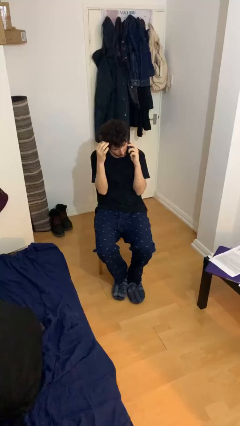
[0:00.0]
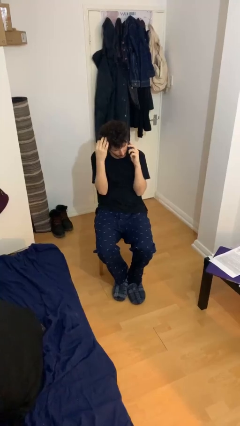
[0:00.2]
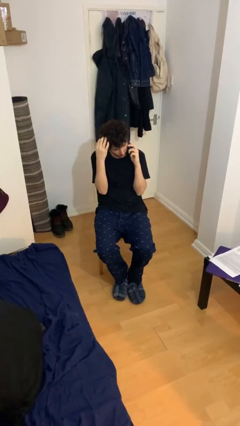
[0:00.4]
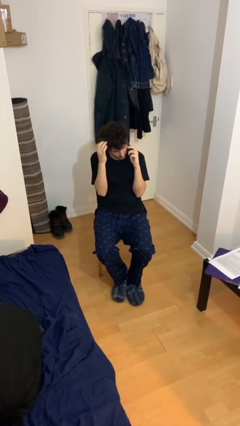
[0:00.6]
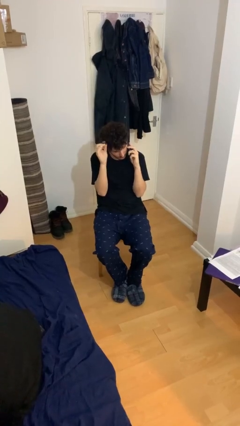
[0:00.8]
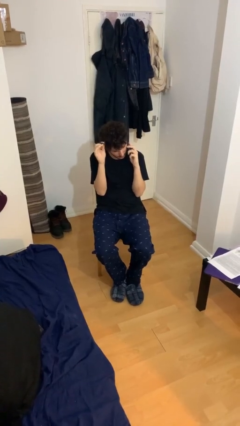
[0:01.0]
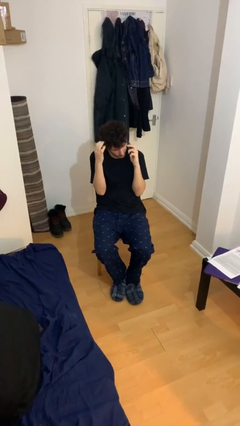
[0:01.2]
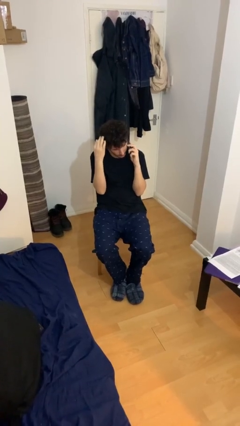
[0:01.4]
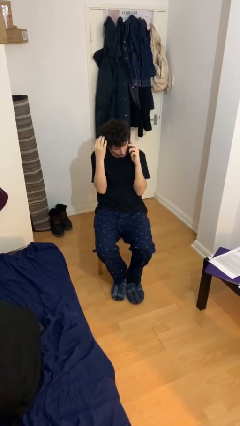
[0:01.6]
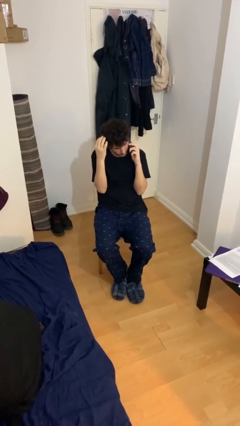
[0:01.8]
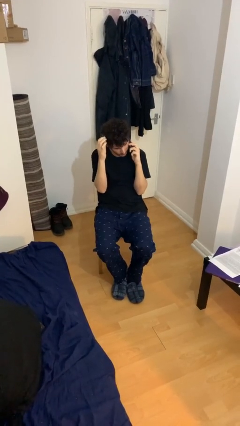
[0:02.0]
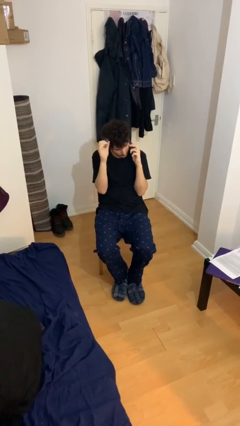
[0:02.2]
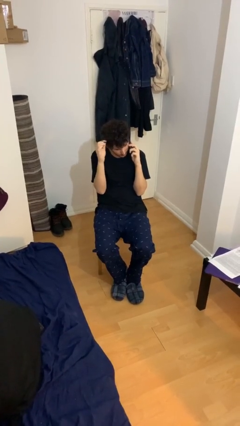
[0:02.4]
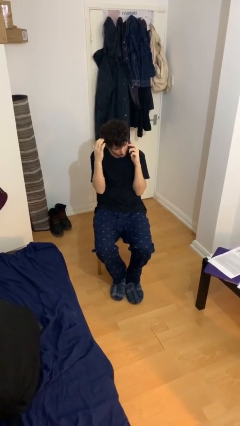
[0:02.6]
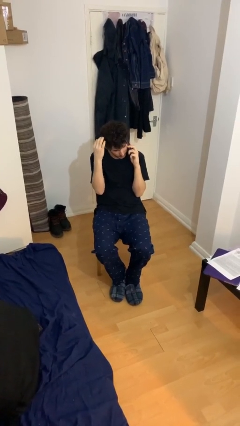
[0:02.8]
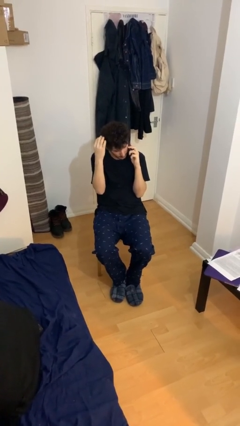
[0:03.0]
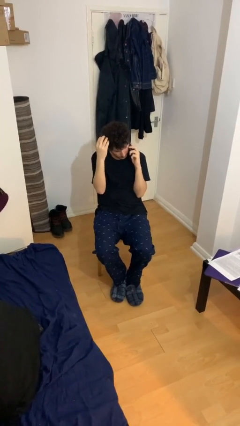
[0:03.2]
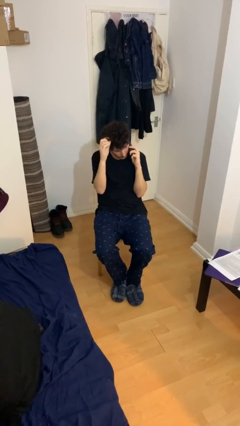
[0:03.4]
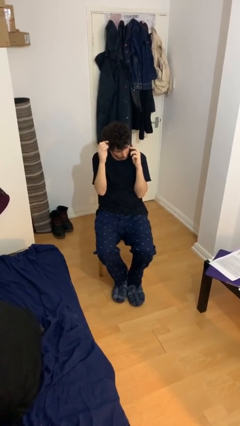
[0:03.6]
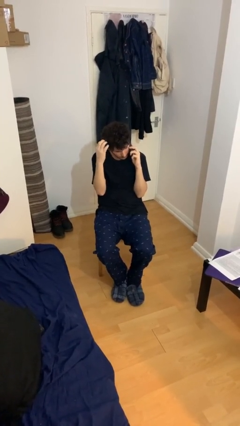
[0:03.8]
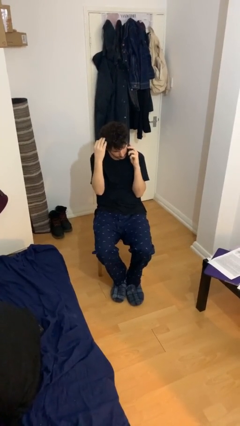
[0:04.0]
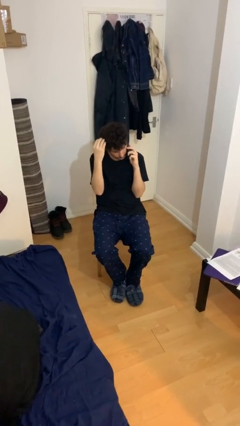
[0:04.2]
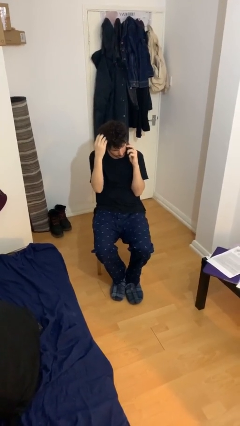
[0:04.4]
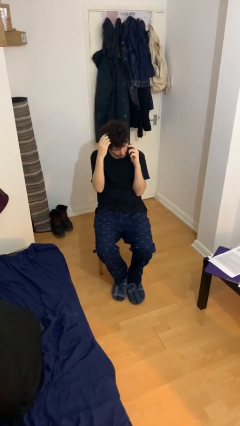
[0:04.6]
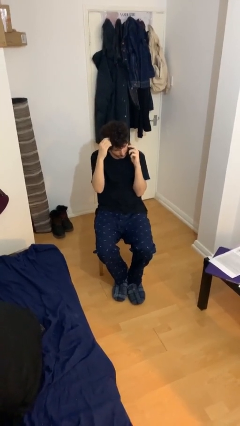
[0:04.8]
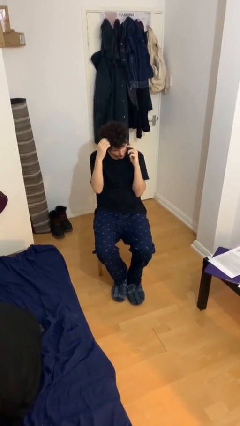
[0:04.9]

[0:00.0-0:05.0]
person talks on phone

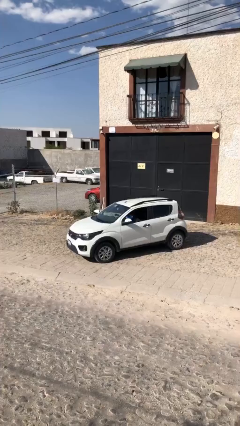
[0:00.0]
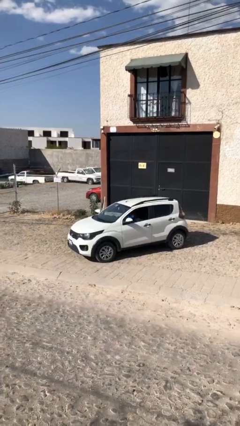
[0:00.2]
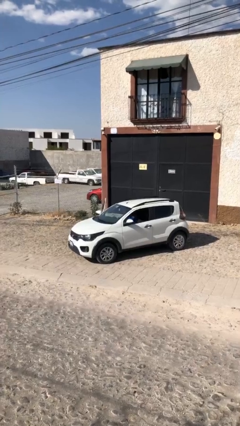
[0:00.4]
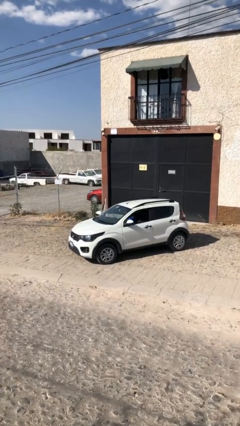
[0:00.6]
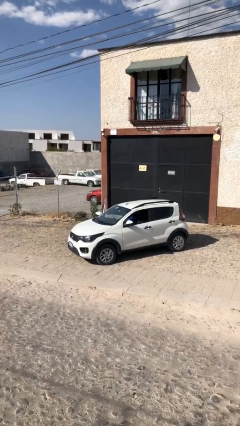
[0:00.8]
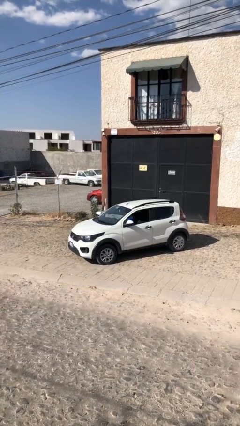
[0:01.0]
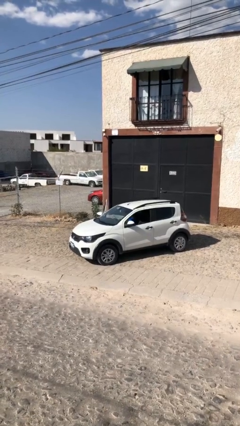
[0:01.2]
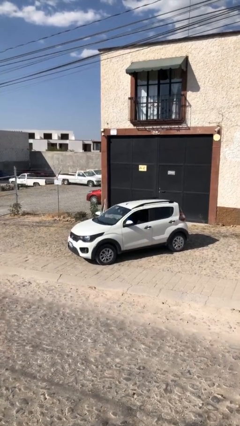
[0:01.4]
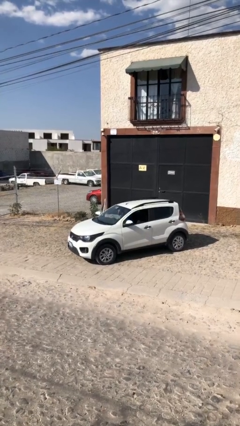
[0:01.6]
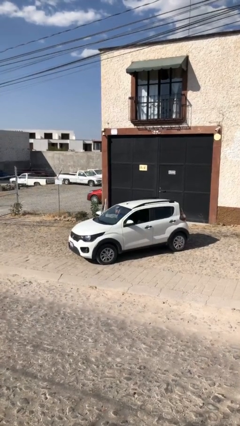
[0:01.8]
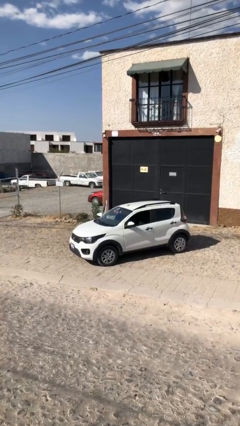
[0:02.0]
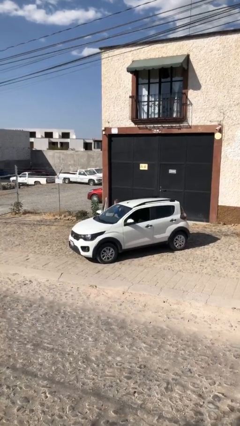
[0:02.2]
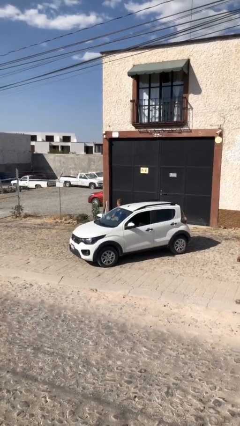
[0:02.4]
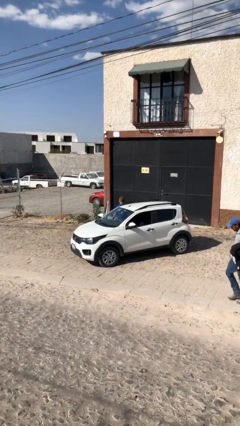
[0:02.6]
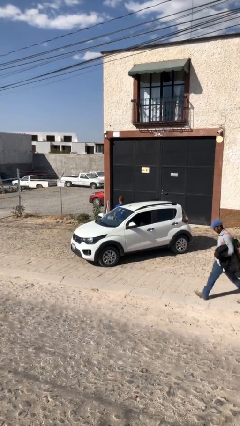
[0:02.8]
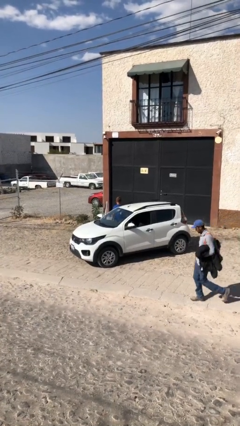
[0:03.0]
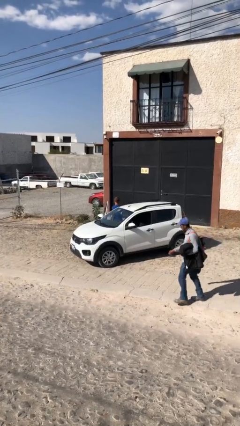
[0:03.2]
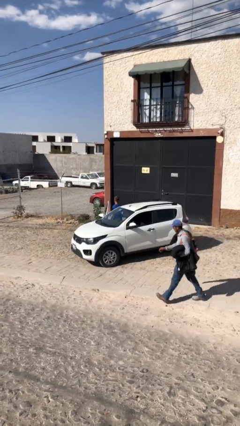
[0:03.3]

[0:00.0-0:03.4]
person exits car

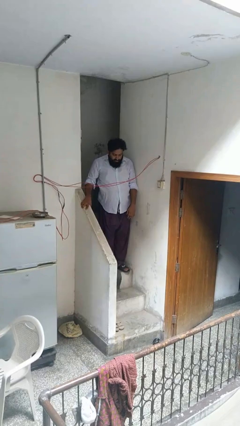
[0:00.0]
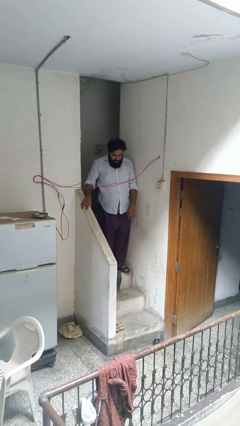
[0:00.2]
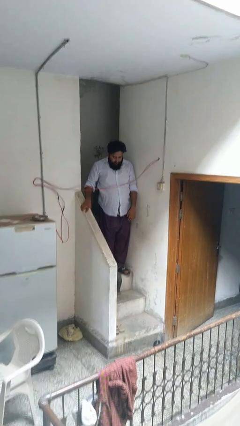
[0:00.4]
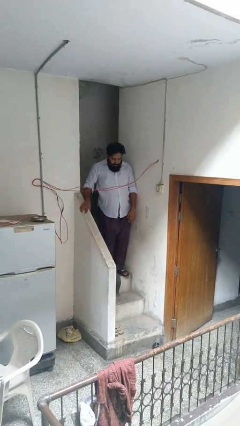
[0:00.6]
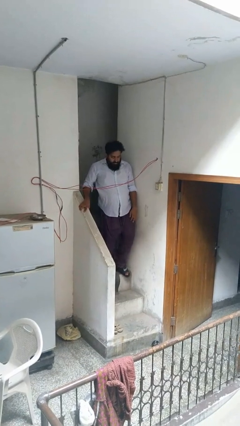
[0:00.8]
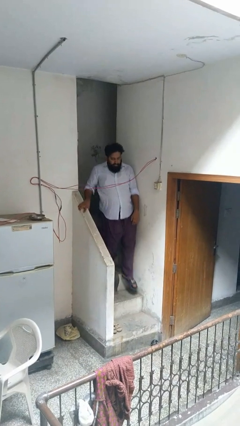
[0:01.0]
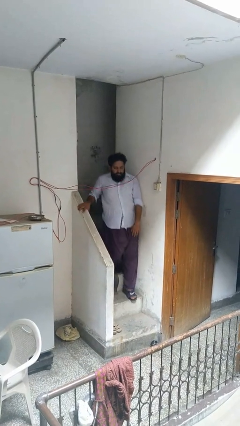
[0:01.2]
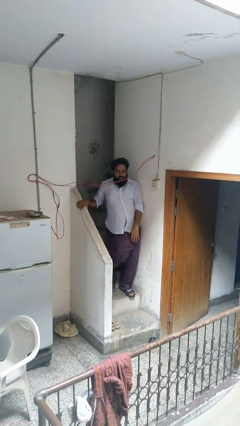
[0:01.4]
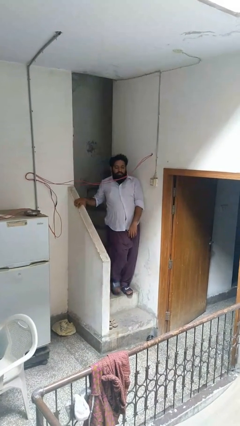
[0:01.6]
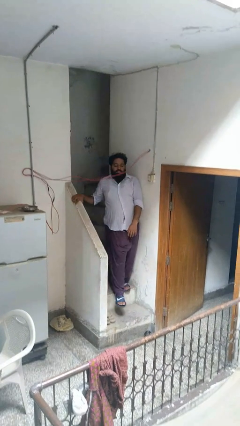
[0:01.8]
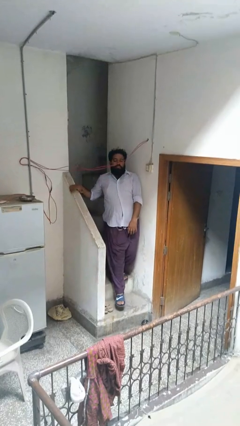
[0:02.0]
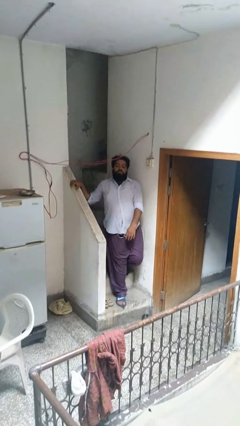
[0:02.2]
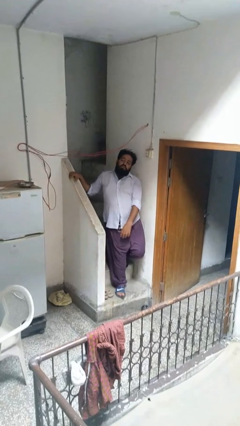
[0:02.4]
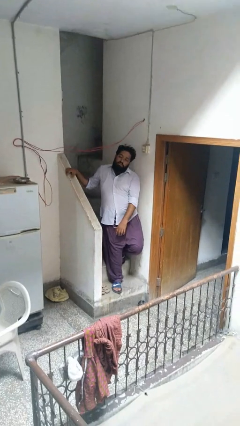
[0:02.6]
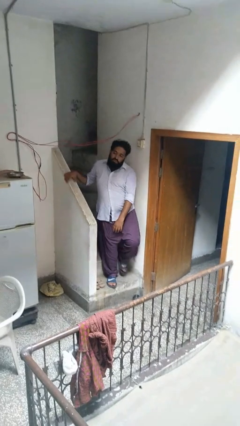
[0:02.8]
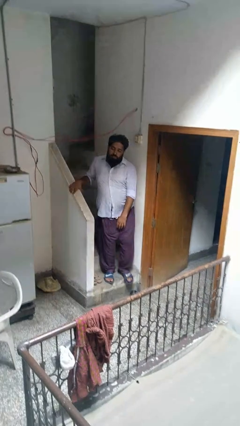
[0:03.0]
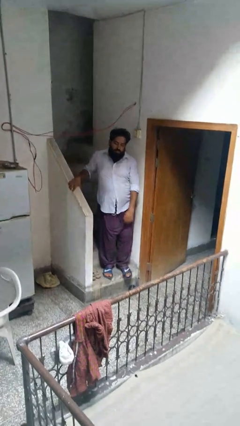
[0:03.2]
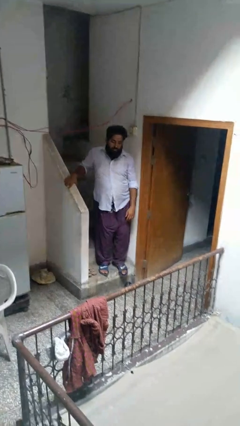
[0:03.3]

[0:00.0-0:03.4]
person climbs down stairs

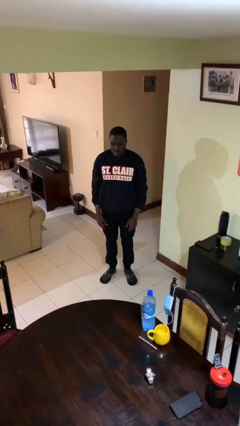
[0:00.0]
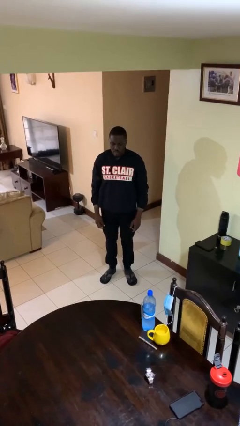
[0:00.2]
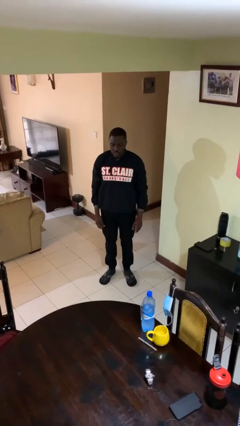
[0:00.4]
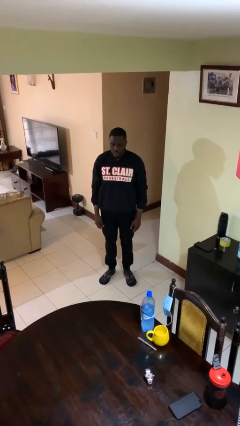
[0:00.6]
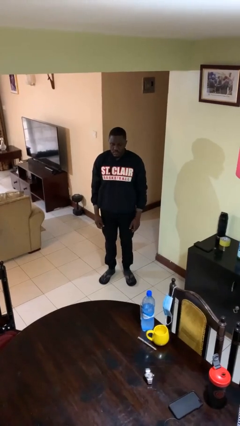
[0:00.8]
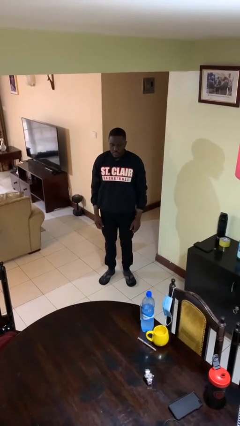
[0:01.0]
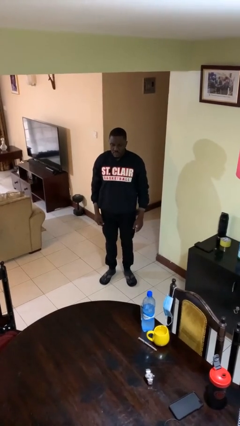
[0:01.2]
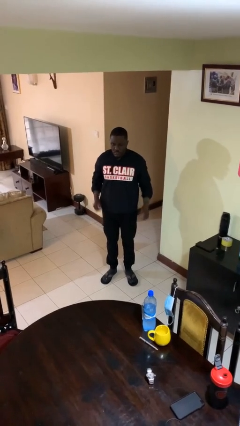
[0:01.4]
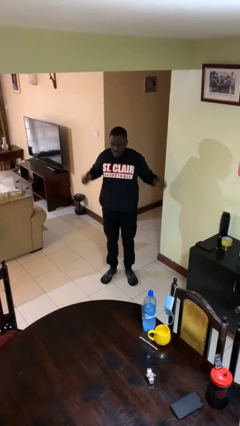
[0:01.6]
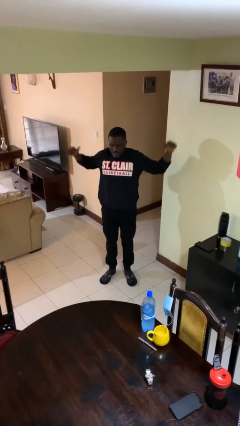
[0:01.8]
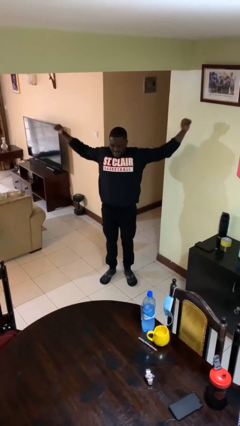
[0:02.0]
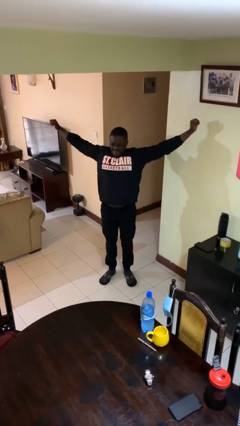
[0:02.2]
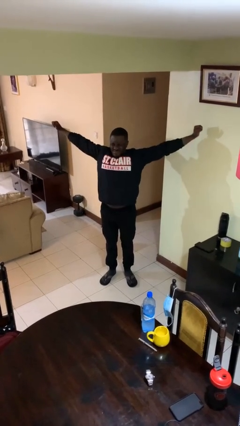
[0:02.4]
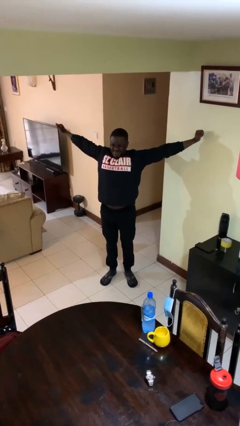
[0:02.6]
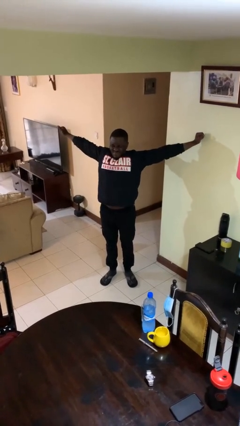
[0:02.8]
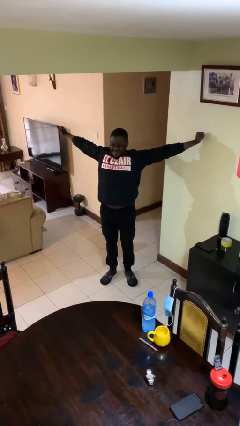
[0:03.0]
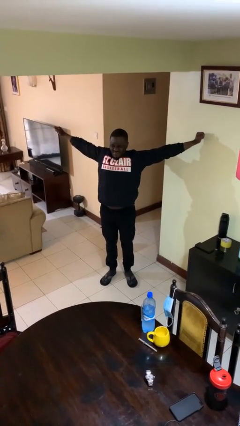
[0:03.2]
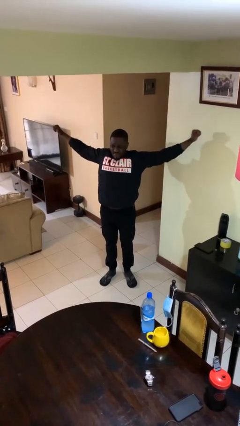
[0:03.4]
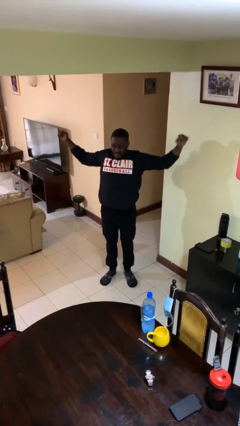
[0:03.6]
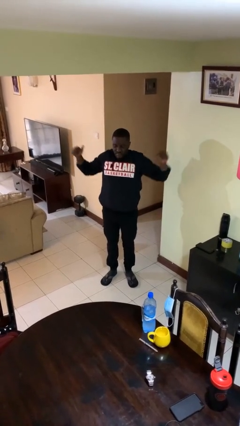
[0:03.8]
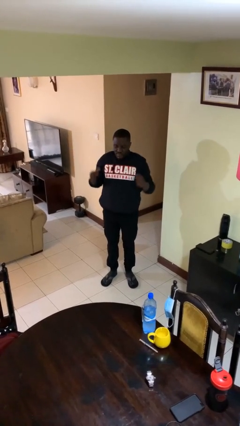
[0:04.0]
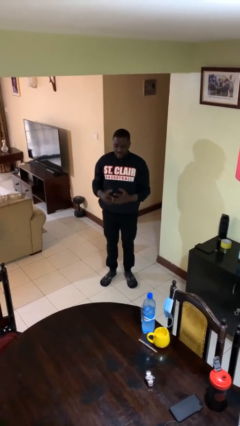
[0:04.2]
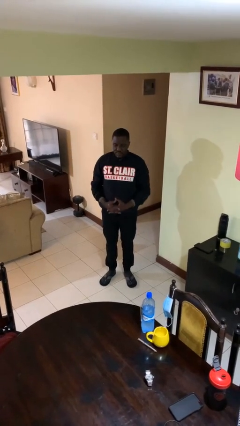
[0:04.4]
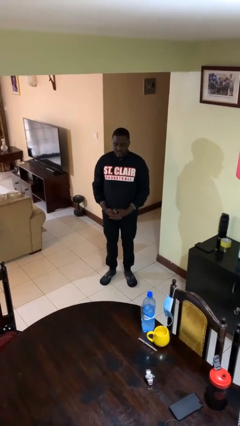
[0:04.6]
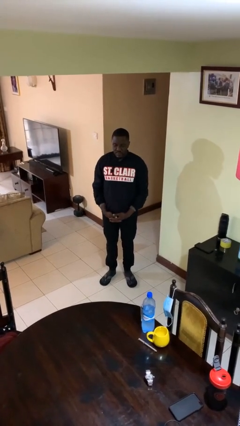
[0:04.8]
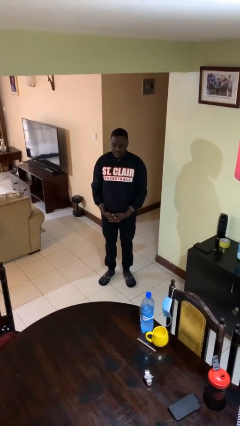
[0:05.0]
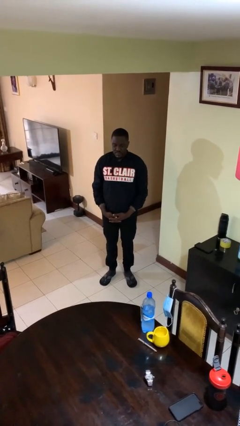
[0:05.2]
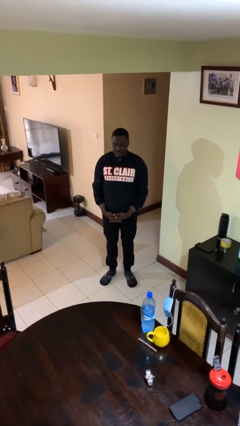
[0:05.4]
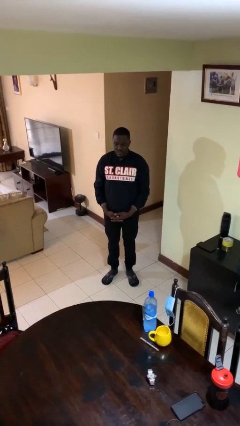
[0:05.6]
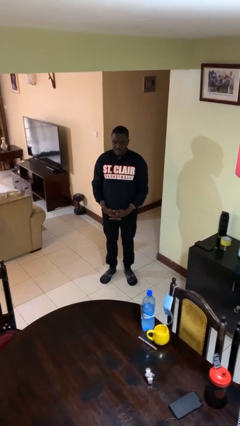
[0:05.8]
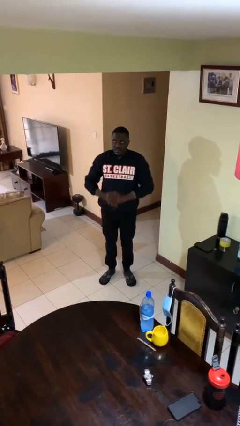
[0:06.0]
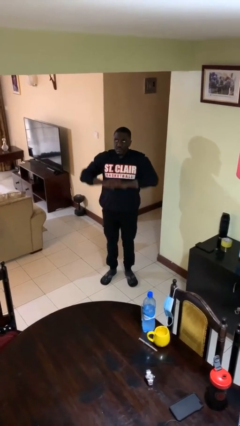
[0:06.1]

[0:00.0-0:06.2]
person stretches arms to side
